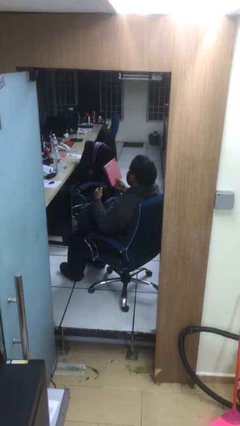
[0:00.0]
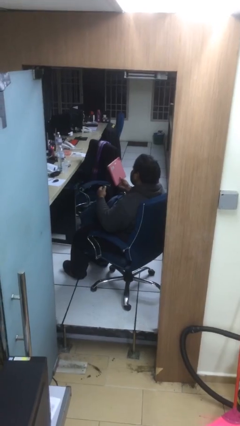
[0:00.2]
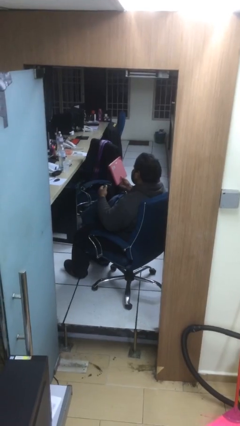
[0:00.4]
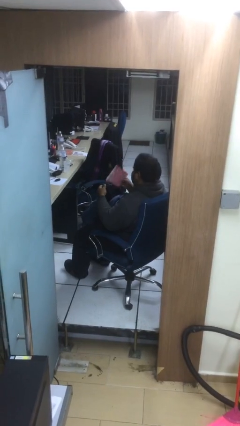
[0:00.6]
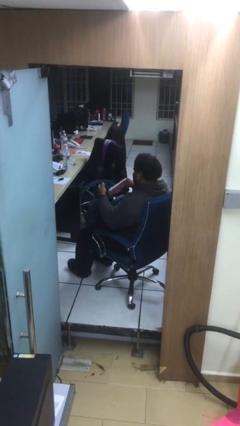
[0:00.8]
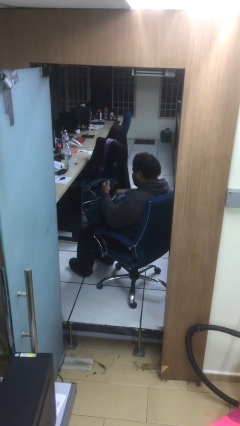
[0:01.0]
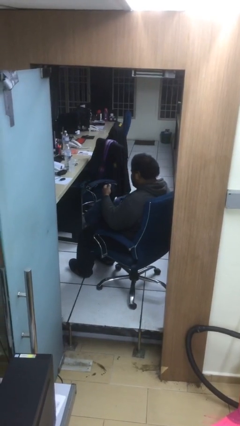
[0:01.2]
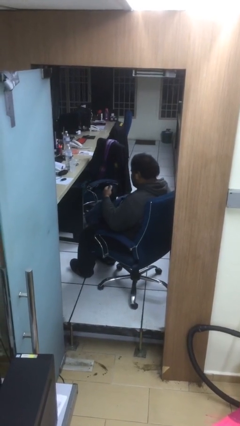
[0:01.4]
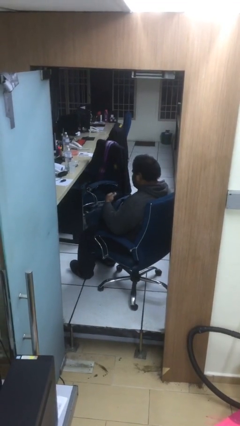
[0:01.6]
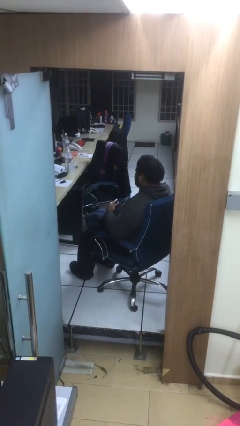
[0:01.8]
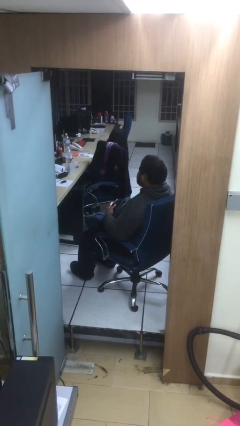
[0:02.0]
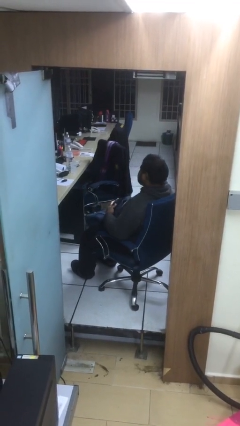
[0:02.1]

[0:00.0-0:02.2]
person puts object into backpack

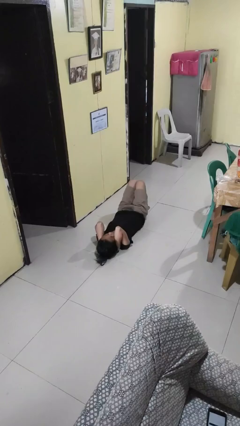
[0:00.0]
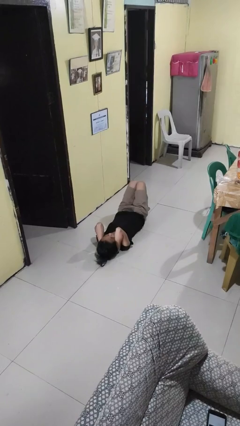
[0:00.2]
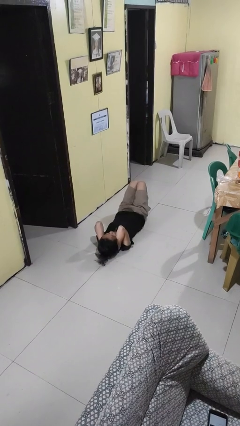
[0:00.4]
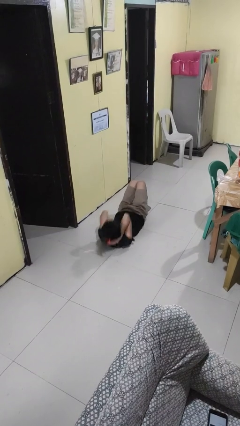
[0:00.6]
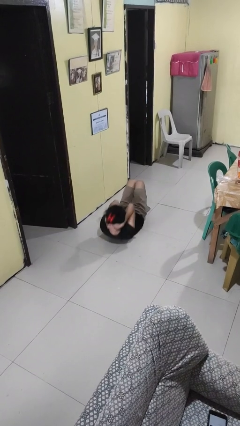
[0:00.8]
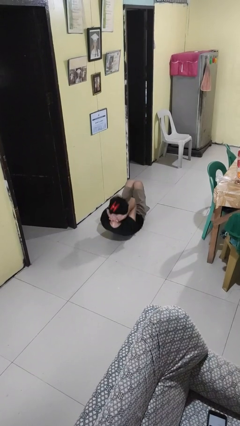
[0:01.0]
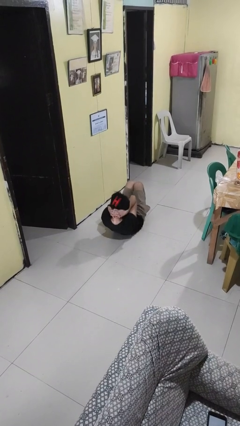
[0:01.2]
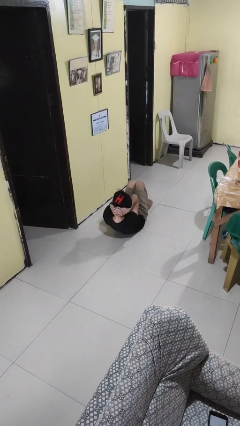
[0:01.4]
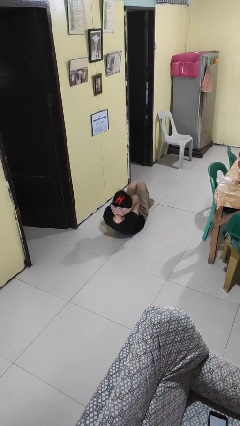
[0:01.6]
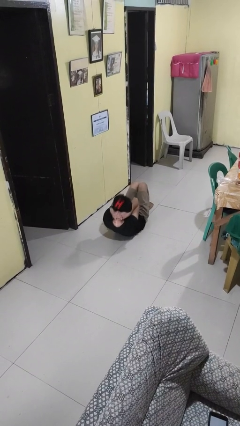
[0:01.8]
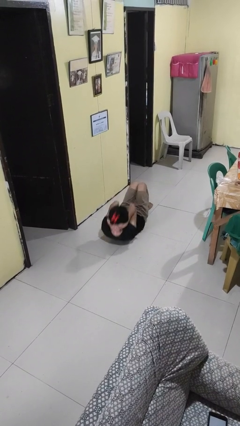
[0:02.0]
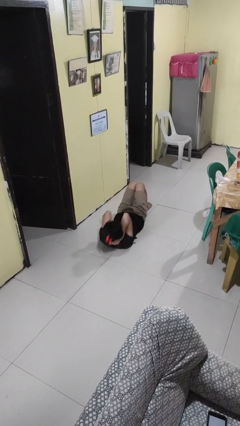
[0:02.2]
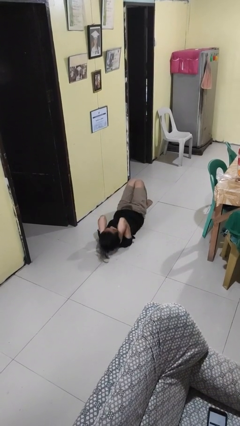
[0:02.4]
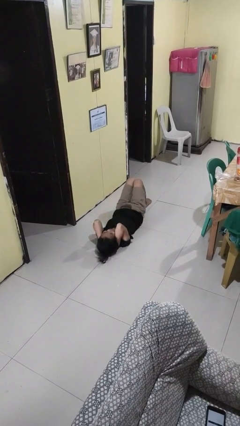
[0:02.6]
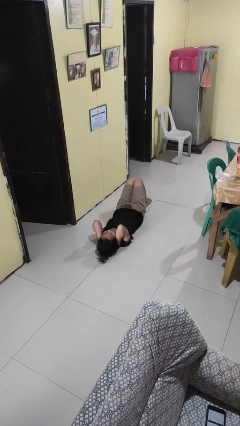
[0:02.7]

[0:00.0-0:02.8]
person exercises with situp

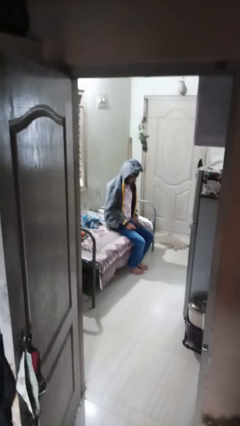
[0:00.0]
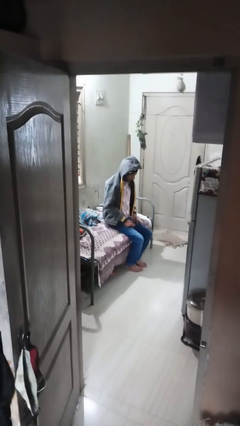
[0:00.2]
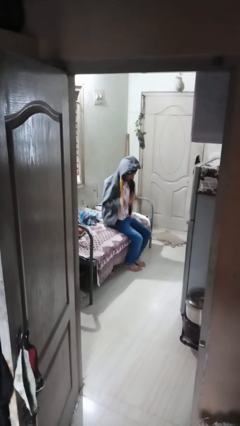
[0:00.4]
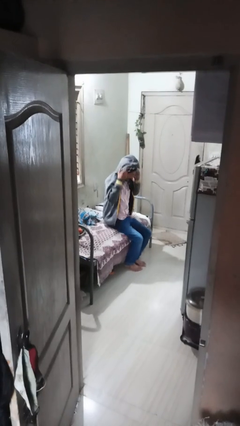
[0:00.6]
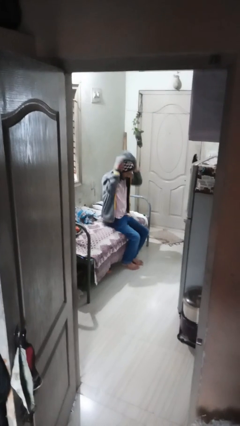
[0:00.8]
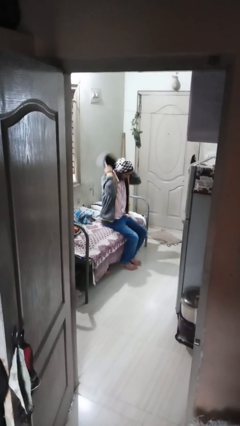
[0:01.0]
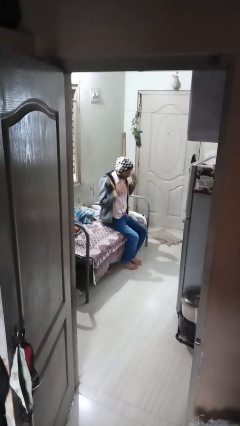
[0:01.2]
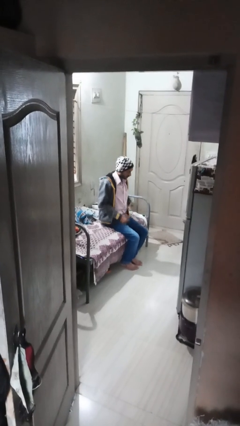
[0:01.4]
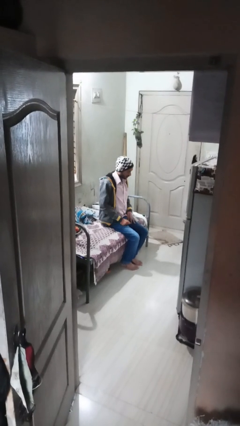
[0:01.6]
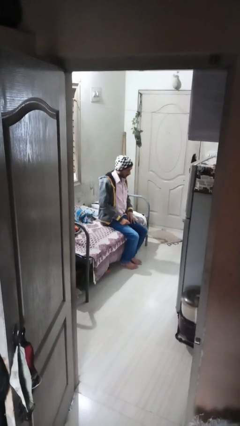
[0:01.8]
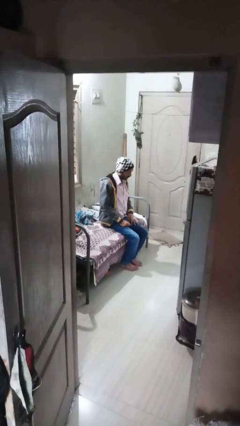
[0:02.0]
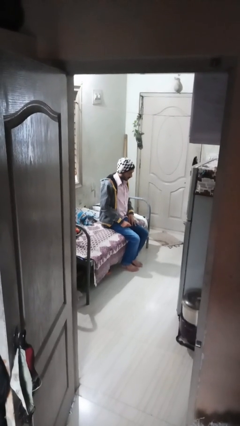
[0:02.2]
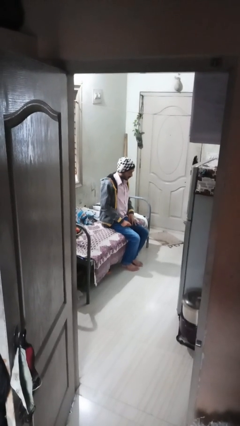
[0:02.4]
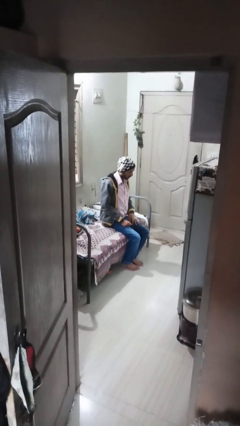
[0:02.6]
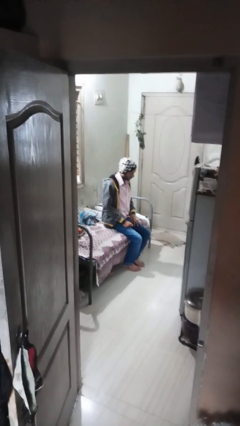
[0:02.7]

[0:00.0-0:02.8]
person takes off hoodie

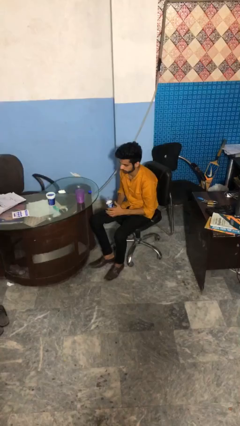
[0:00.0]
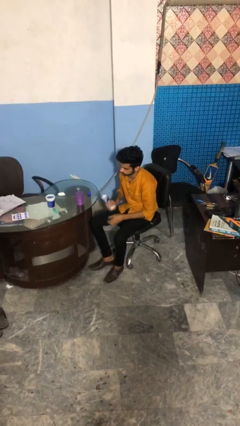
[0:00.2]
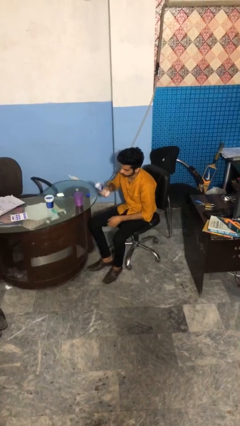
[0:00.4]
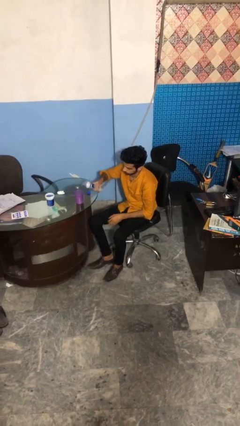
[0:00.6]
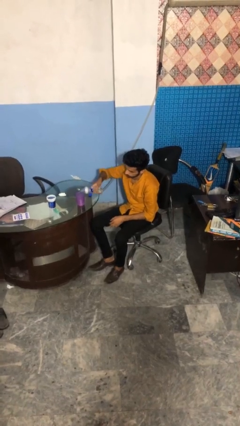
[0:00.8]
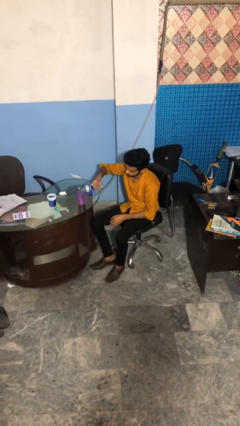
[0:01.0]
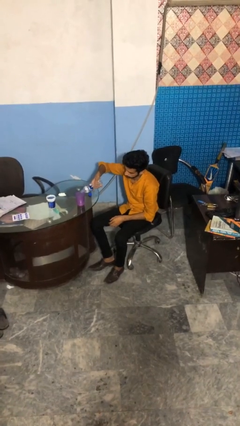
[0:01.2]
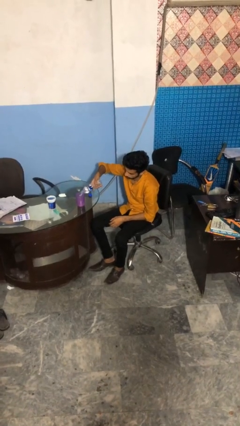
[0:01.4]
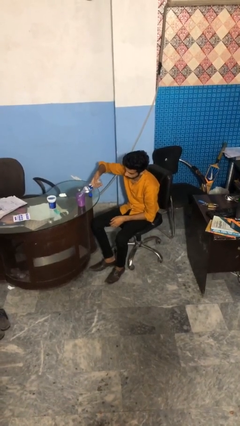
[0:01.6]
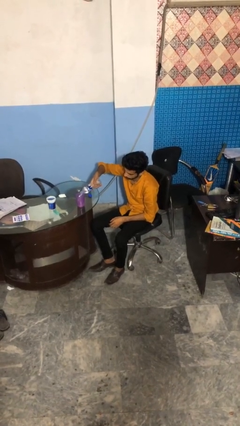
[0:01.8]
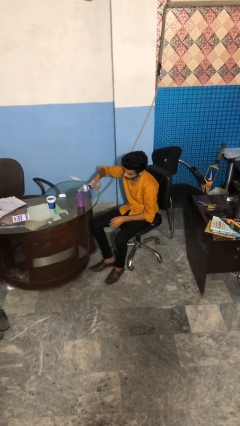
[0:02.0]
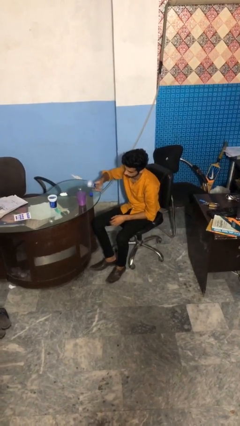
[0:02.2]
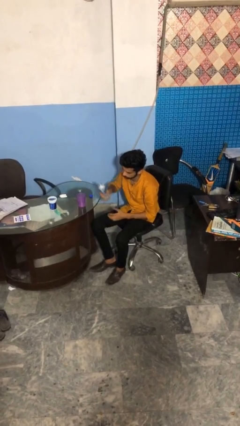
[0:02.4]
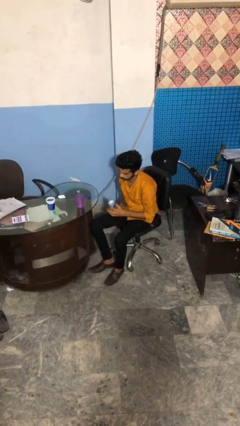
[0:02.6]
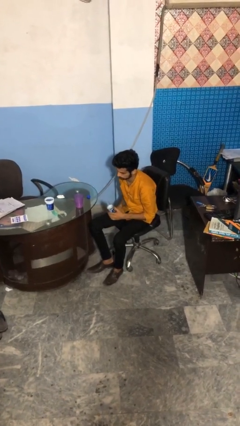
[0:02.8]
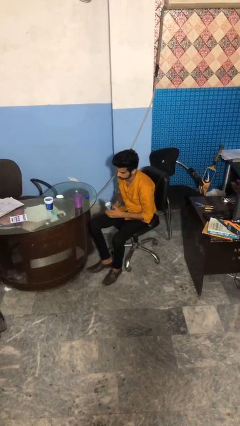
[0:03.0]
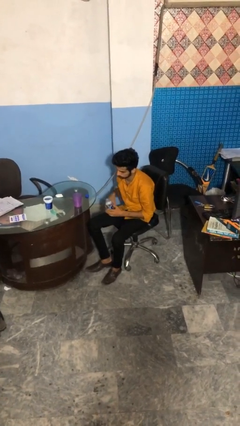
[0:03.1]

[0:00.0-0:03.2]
person pours liquid into cup

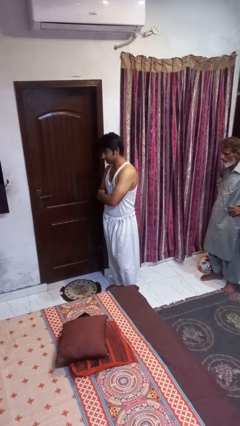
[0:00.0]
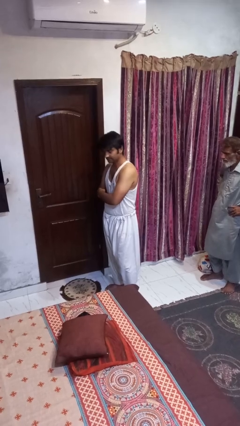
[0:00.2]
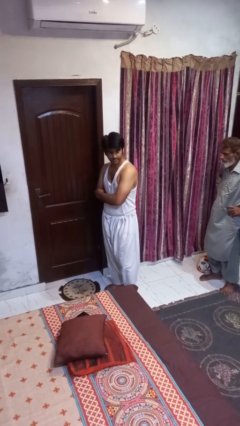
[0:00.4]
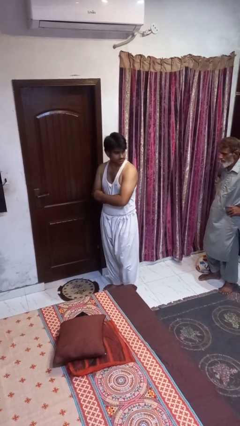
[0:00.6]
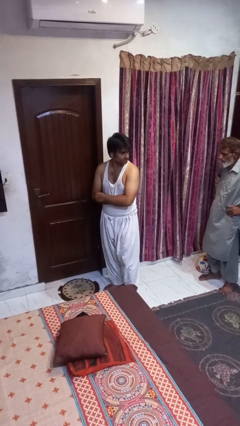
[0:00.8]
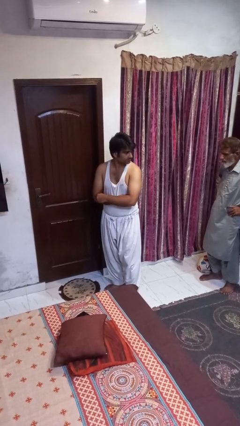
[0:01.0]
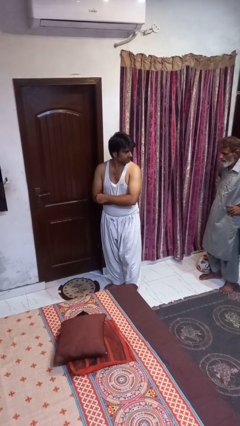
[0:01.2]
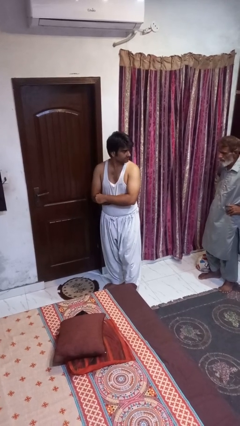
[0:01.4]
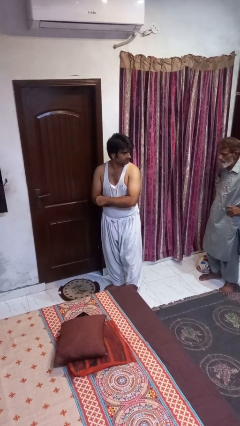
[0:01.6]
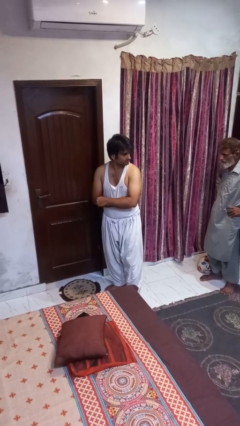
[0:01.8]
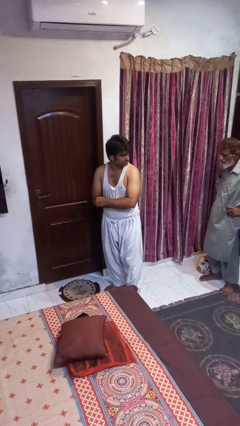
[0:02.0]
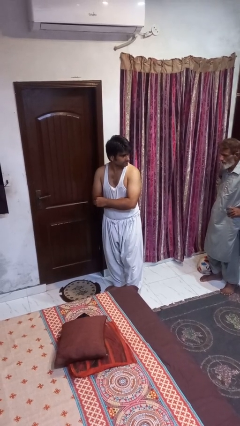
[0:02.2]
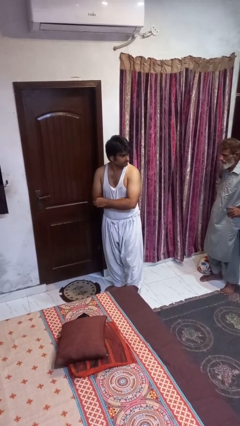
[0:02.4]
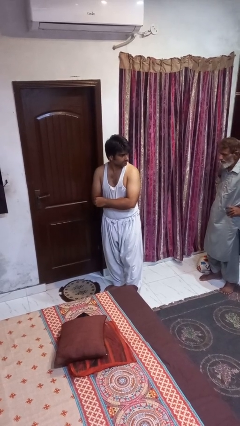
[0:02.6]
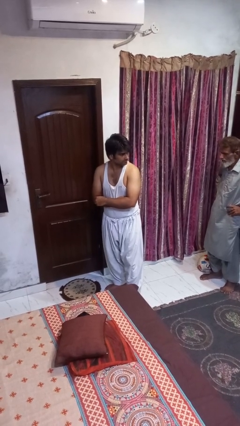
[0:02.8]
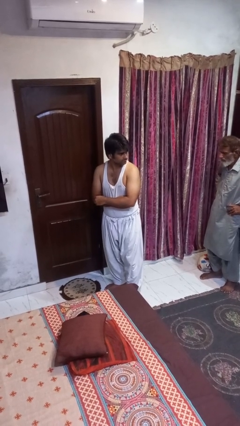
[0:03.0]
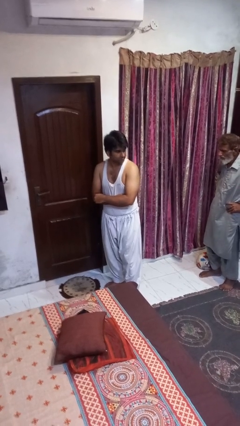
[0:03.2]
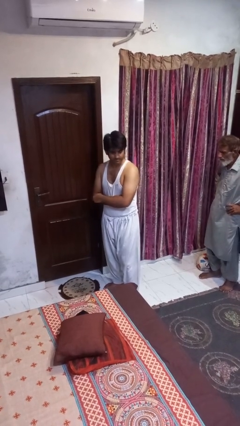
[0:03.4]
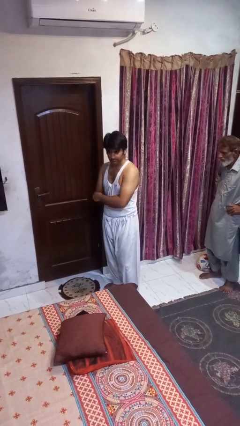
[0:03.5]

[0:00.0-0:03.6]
person looks over shoulder

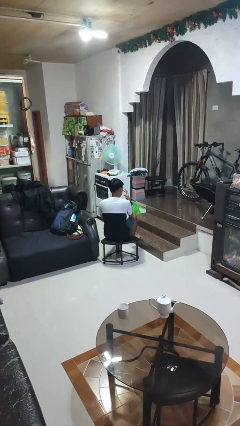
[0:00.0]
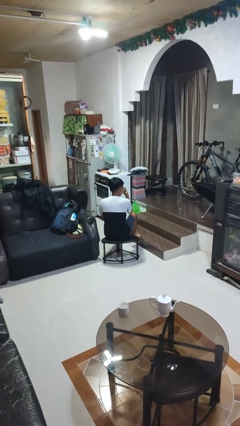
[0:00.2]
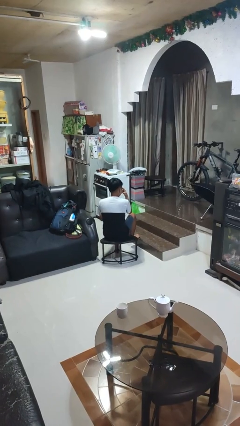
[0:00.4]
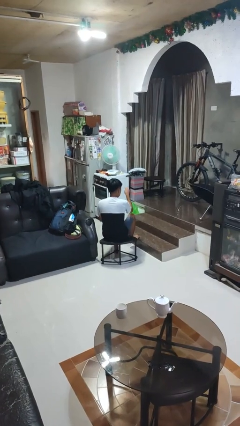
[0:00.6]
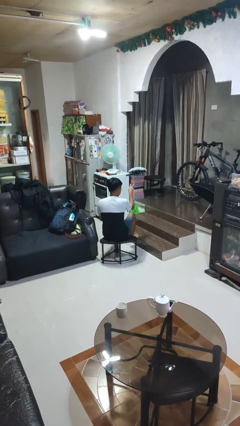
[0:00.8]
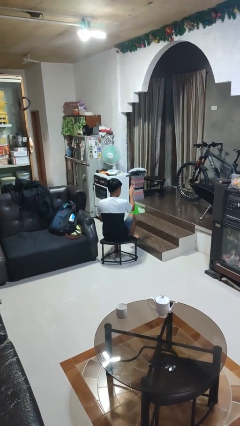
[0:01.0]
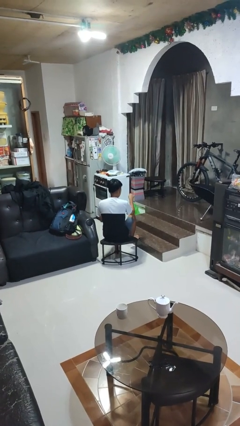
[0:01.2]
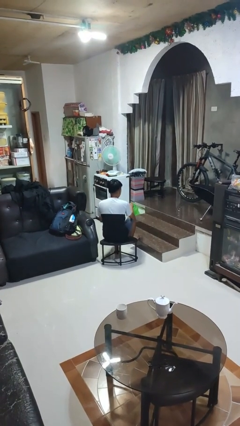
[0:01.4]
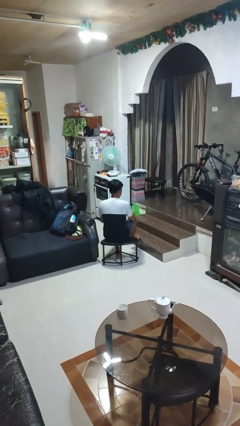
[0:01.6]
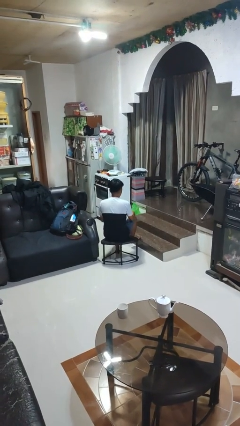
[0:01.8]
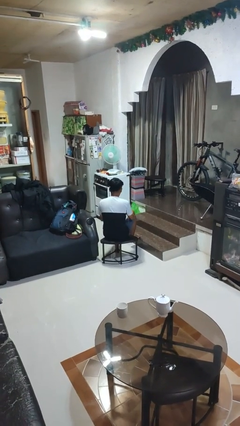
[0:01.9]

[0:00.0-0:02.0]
person gestures watch closely

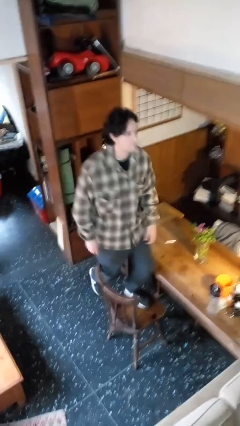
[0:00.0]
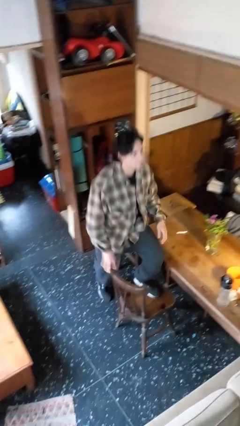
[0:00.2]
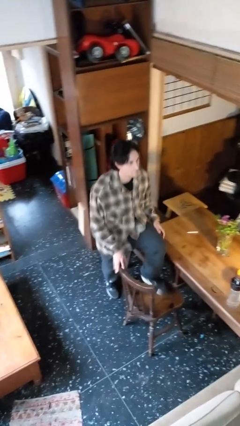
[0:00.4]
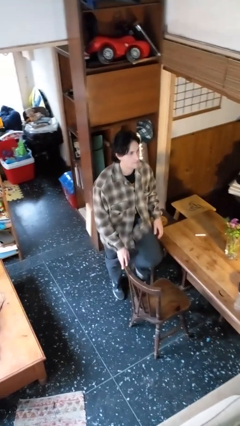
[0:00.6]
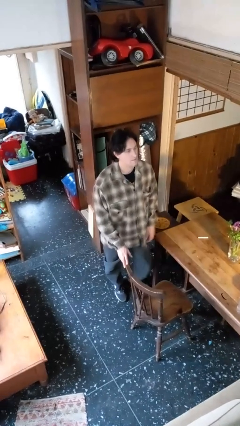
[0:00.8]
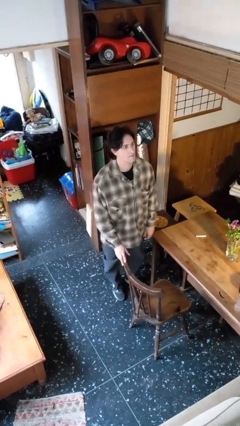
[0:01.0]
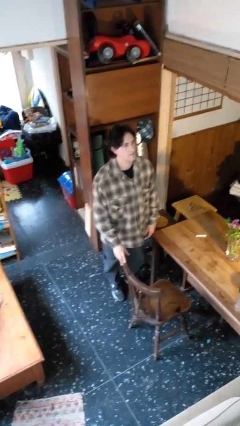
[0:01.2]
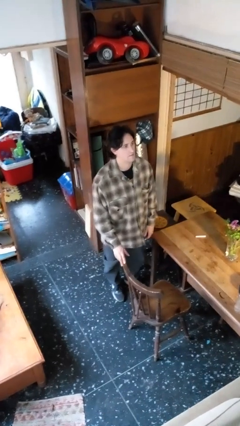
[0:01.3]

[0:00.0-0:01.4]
person climbs off chair
